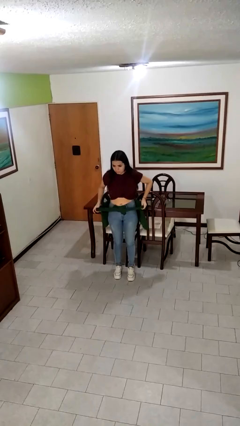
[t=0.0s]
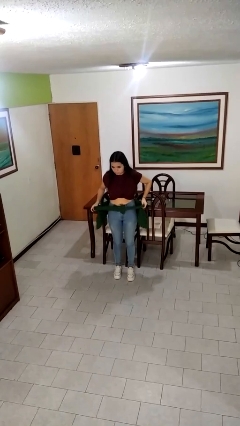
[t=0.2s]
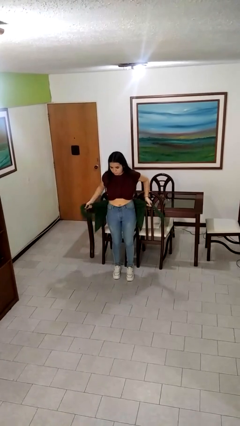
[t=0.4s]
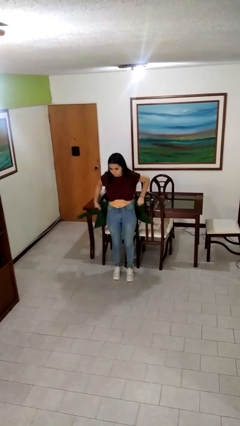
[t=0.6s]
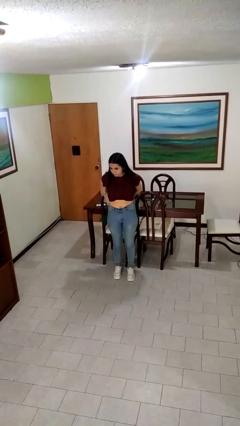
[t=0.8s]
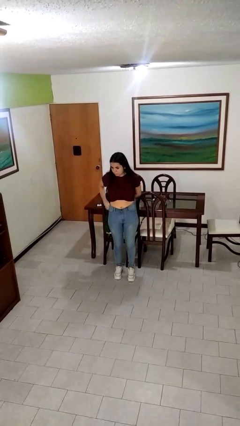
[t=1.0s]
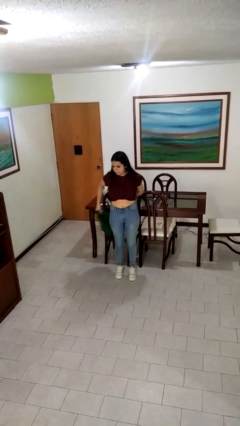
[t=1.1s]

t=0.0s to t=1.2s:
person unties jacket around waist

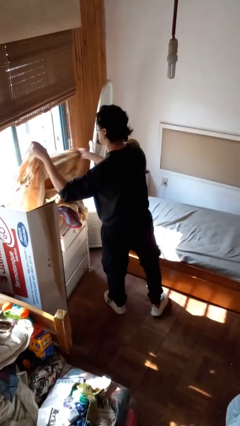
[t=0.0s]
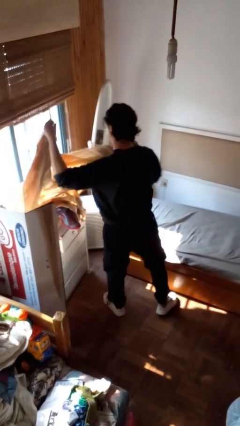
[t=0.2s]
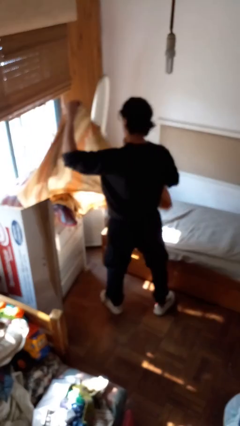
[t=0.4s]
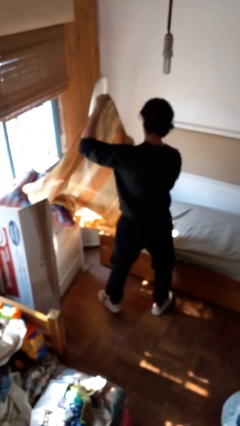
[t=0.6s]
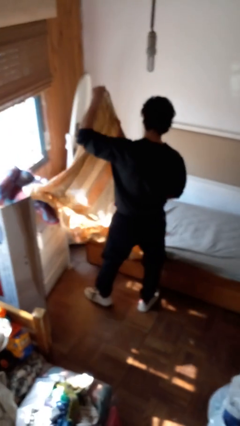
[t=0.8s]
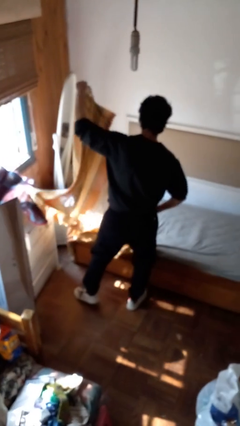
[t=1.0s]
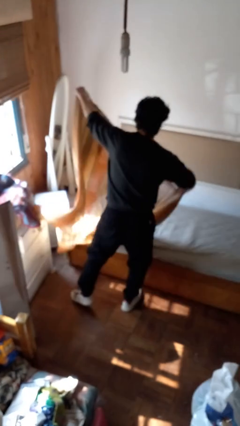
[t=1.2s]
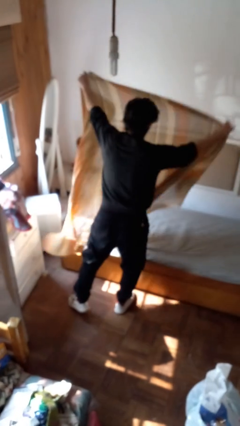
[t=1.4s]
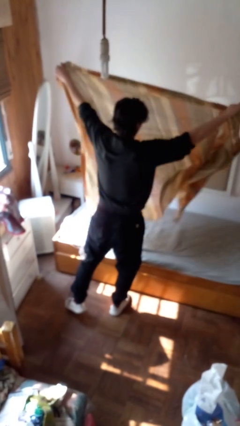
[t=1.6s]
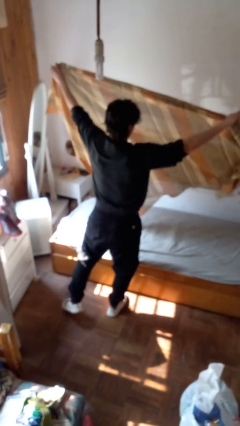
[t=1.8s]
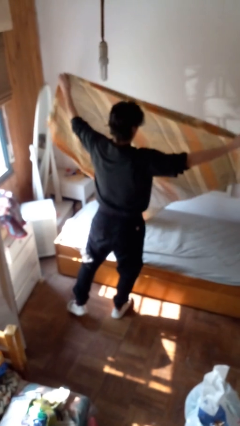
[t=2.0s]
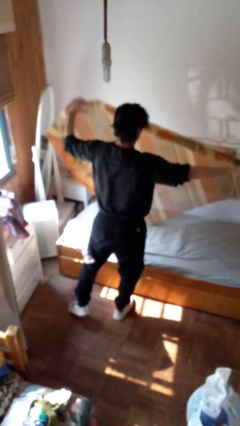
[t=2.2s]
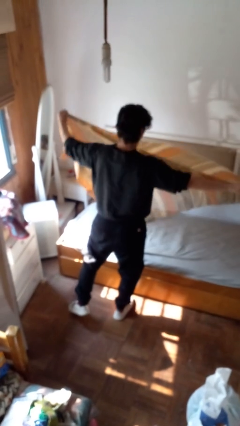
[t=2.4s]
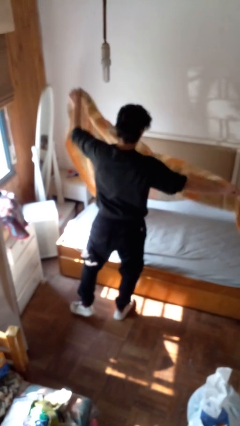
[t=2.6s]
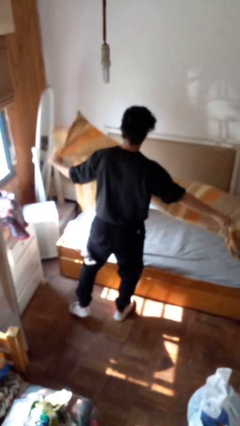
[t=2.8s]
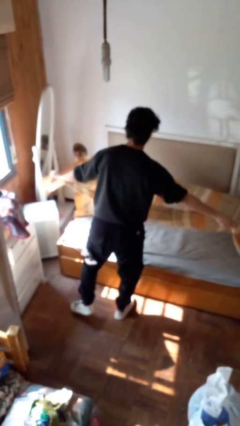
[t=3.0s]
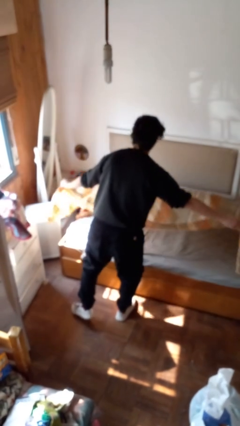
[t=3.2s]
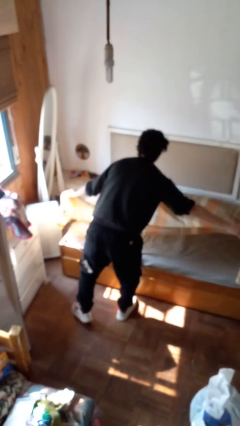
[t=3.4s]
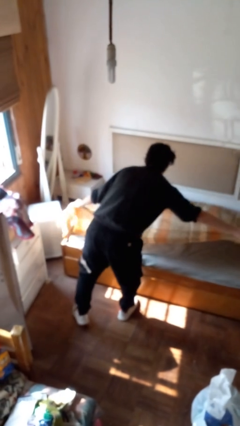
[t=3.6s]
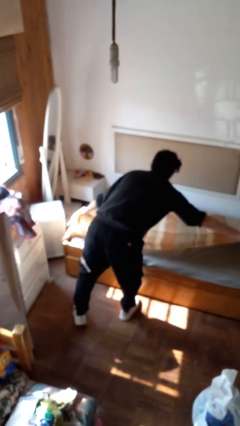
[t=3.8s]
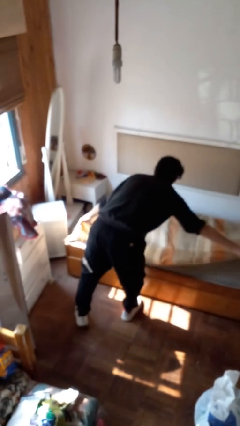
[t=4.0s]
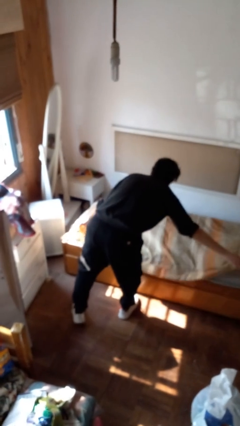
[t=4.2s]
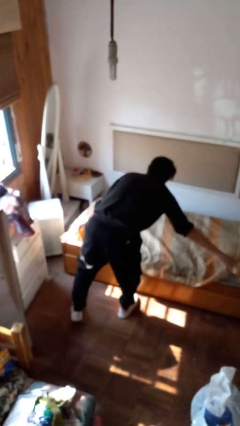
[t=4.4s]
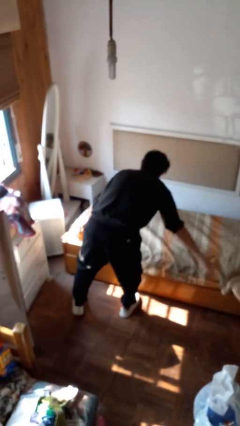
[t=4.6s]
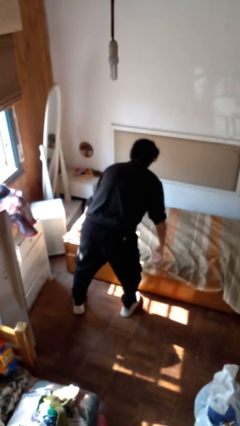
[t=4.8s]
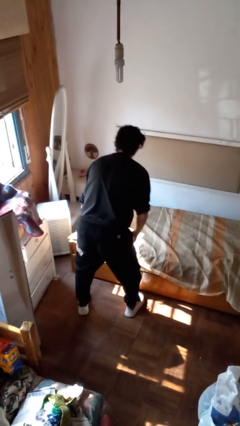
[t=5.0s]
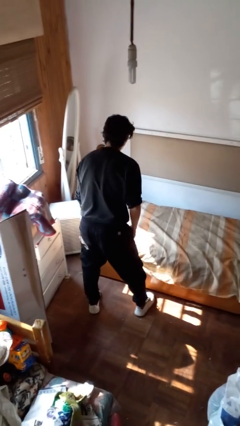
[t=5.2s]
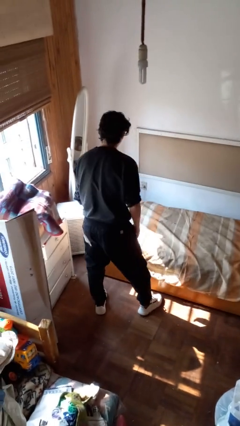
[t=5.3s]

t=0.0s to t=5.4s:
person makes bed

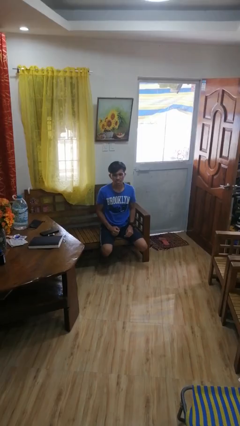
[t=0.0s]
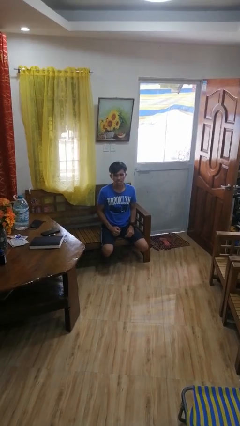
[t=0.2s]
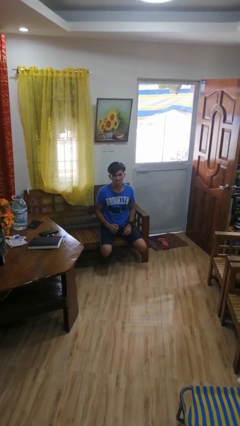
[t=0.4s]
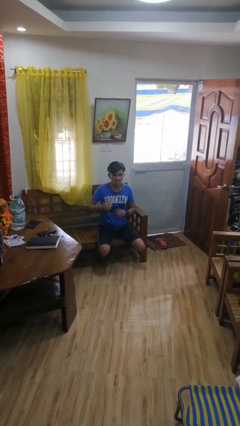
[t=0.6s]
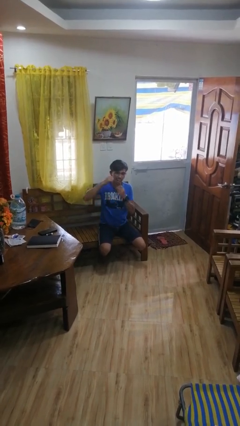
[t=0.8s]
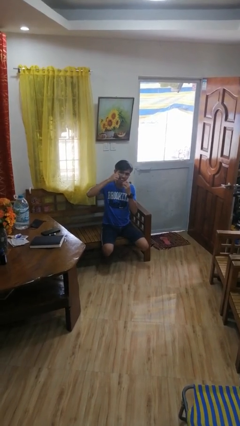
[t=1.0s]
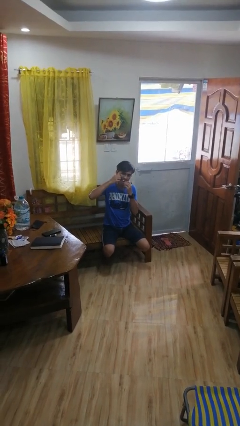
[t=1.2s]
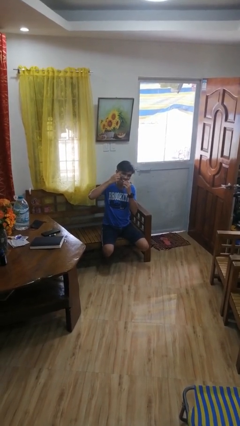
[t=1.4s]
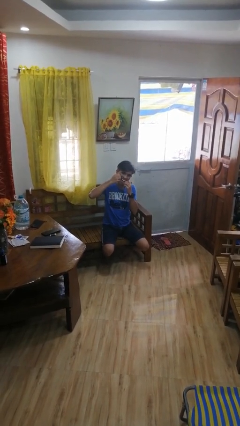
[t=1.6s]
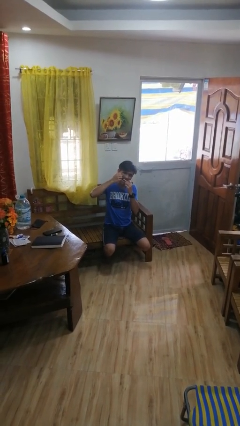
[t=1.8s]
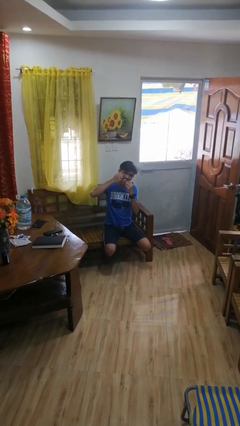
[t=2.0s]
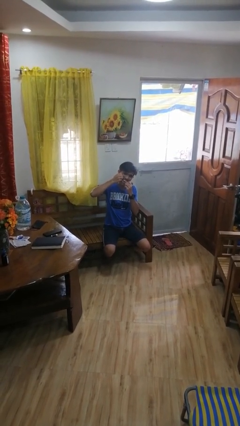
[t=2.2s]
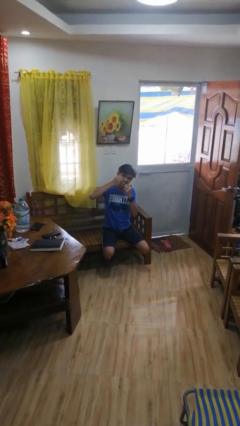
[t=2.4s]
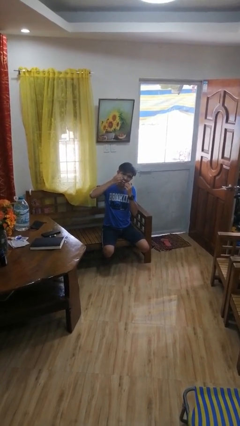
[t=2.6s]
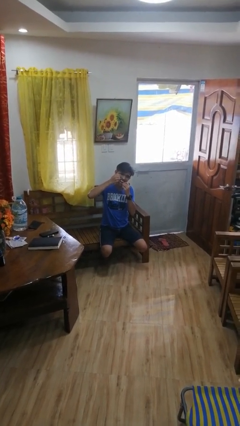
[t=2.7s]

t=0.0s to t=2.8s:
person flosses

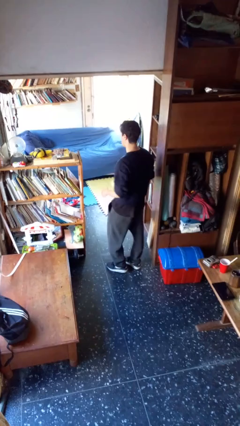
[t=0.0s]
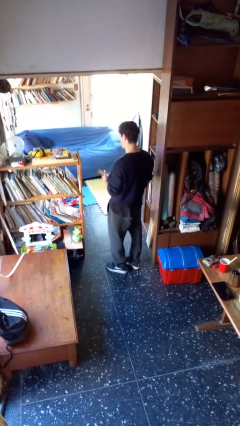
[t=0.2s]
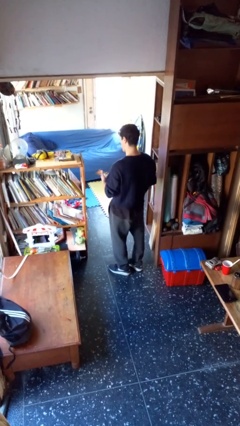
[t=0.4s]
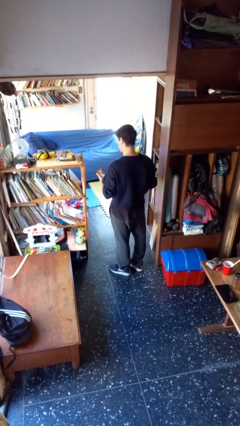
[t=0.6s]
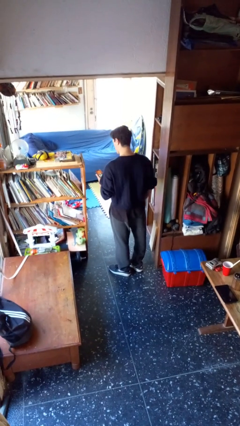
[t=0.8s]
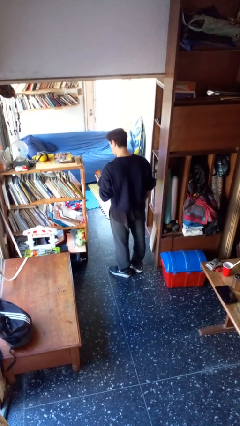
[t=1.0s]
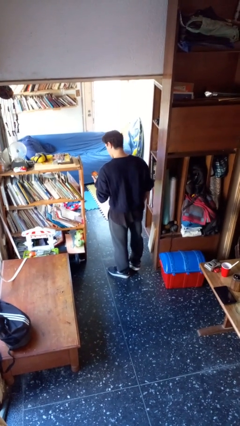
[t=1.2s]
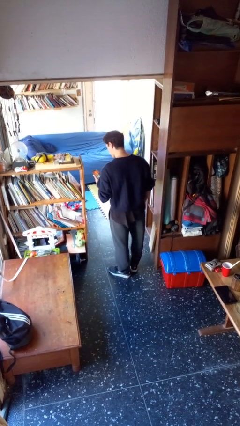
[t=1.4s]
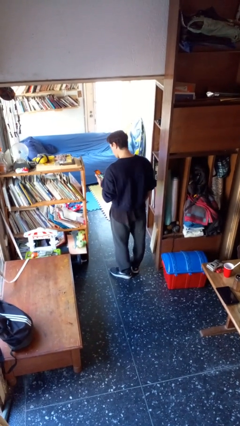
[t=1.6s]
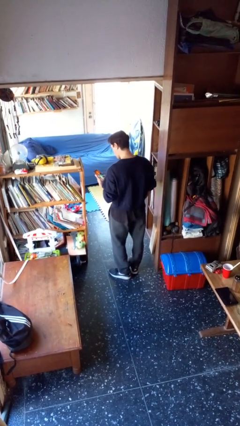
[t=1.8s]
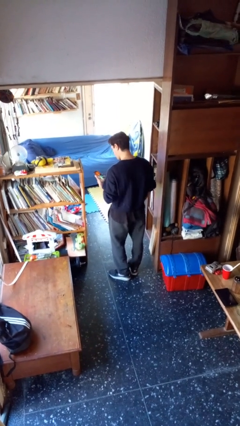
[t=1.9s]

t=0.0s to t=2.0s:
person takes phone from pocket

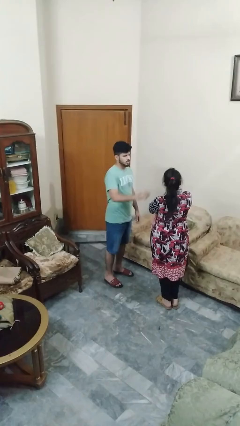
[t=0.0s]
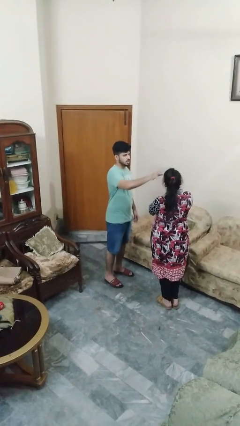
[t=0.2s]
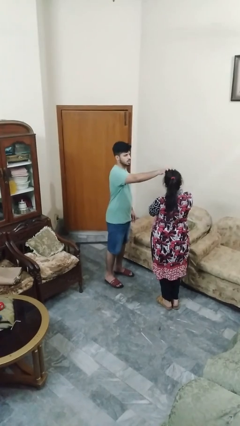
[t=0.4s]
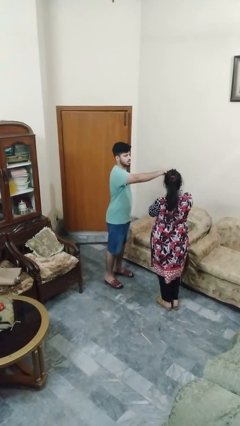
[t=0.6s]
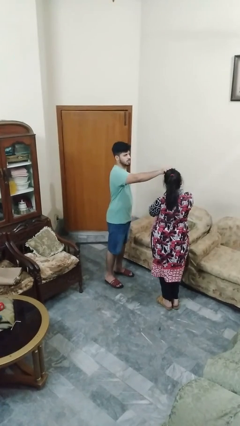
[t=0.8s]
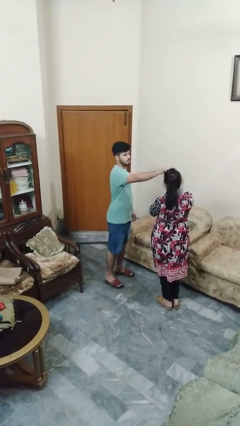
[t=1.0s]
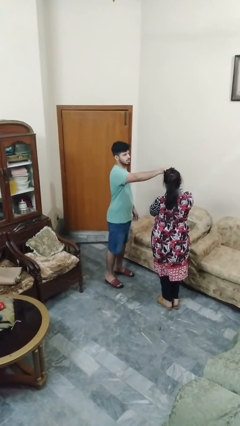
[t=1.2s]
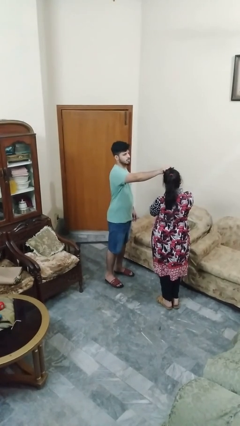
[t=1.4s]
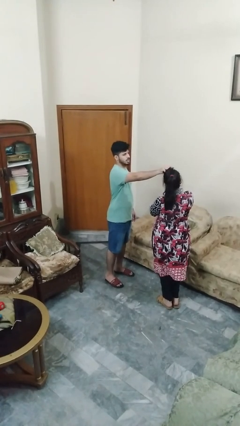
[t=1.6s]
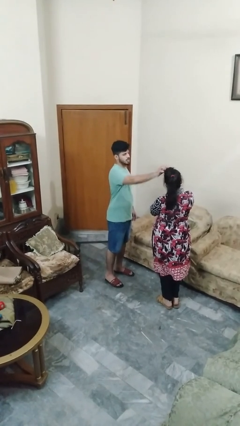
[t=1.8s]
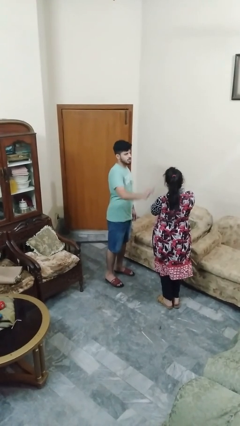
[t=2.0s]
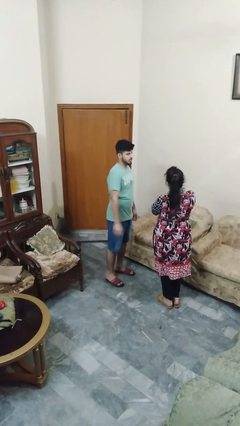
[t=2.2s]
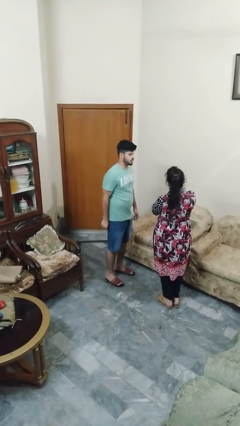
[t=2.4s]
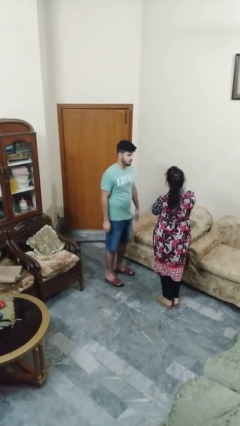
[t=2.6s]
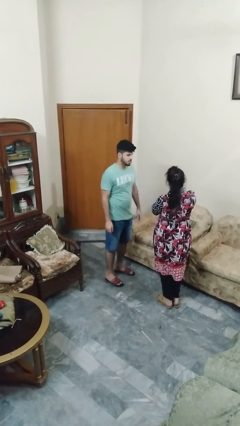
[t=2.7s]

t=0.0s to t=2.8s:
person grabs person by hair

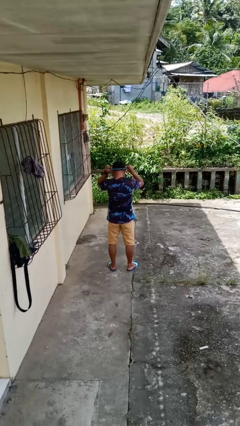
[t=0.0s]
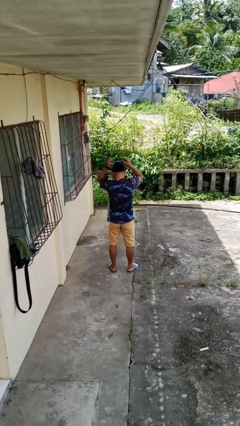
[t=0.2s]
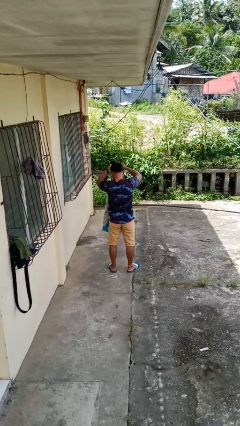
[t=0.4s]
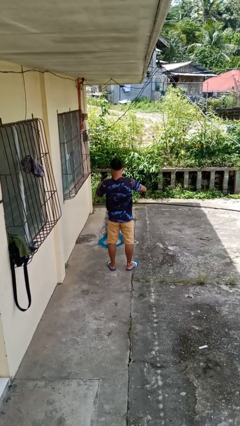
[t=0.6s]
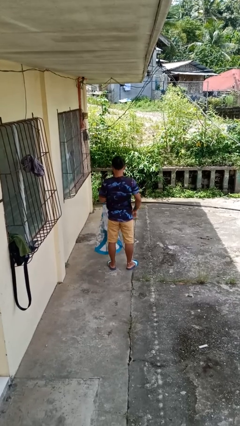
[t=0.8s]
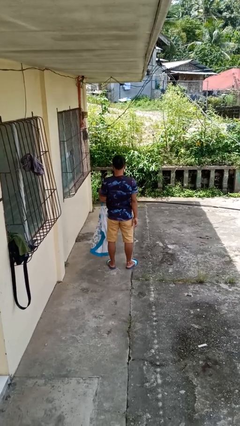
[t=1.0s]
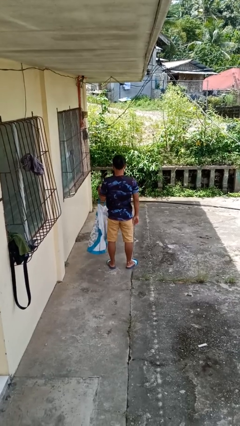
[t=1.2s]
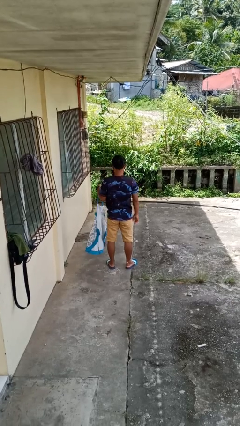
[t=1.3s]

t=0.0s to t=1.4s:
person takes off apron

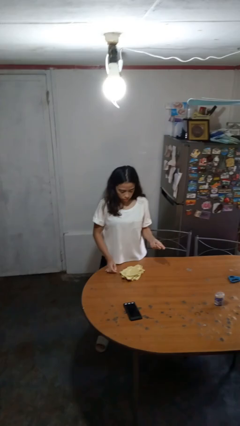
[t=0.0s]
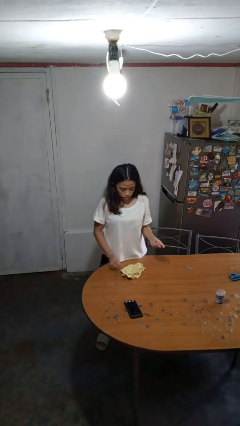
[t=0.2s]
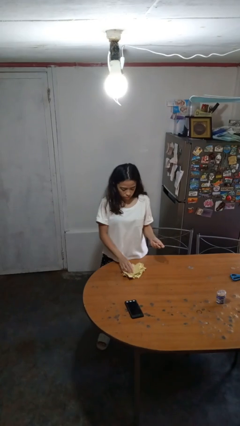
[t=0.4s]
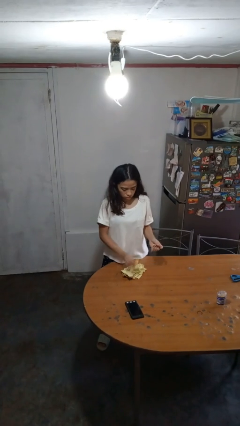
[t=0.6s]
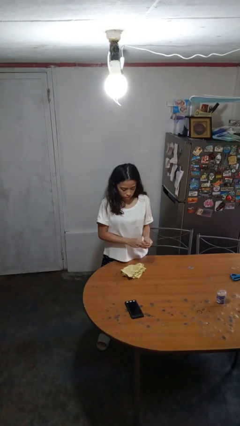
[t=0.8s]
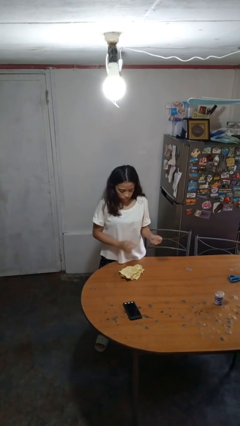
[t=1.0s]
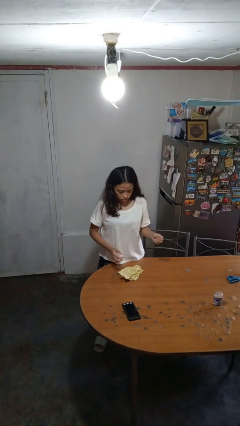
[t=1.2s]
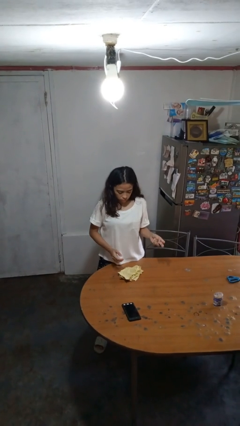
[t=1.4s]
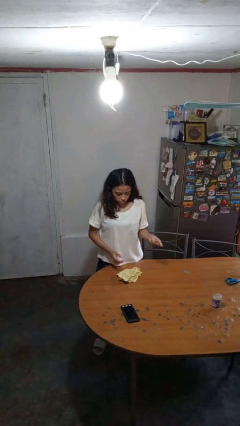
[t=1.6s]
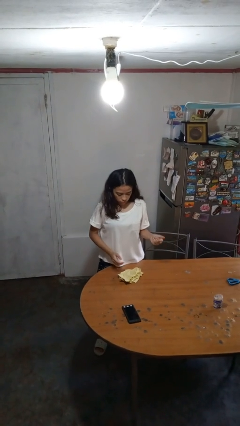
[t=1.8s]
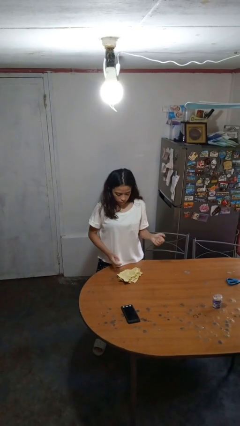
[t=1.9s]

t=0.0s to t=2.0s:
person crumples paper
